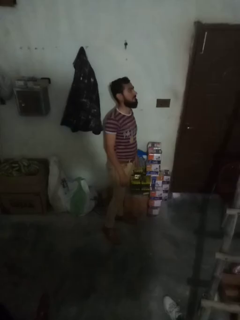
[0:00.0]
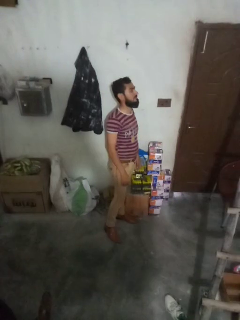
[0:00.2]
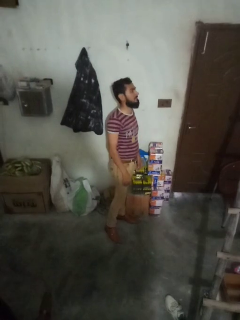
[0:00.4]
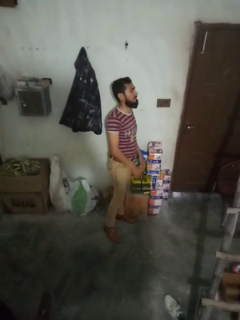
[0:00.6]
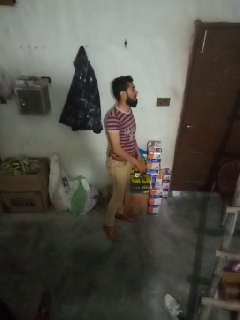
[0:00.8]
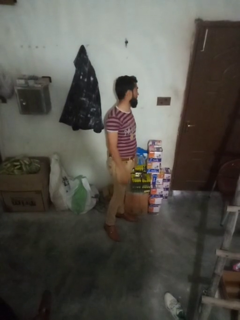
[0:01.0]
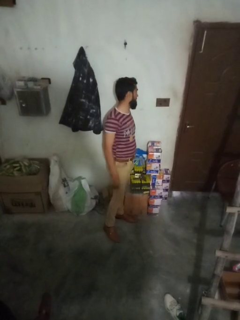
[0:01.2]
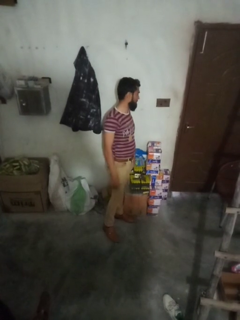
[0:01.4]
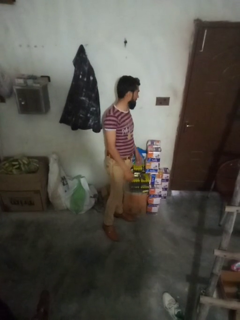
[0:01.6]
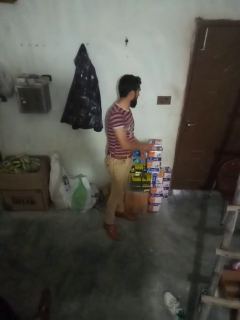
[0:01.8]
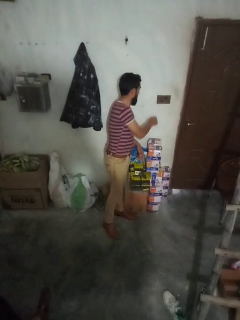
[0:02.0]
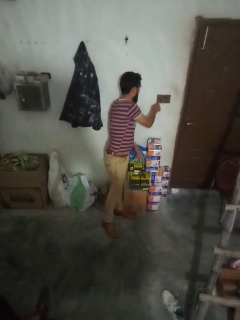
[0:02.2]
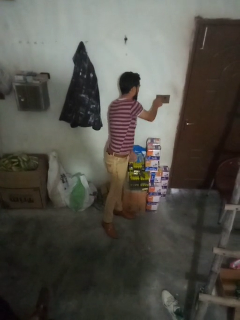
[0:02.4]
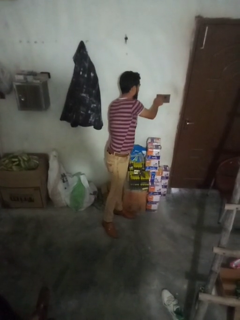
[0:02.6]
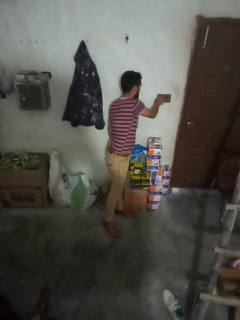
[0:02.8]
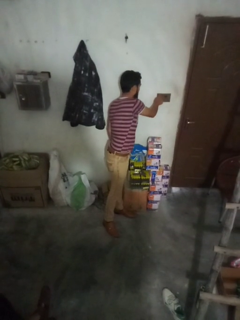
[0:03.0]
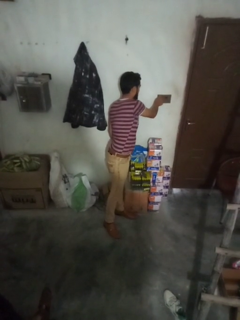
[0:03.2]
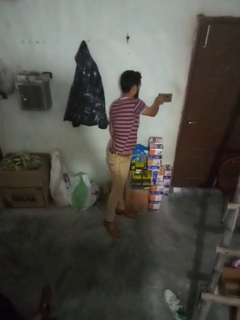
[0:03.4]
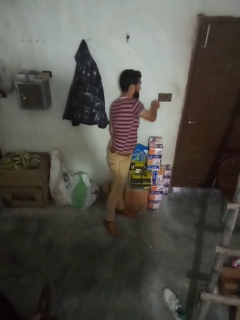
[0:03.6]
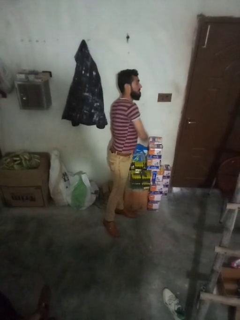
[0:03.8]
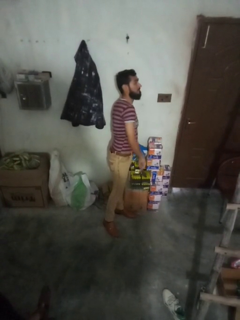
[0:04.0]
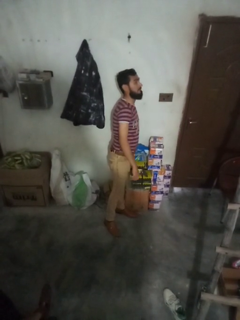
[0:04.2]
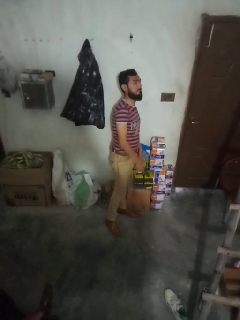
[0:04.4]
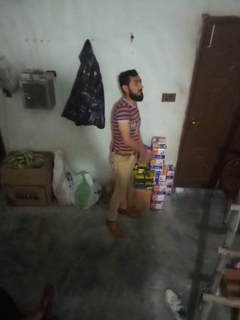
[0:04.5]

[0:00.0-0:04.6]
person adjusts thermostat

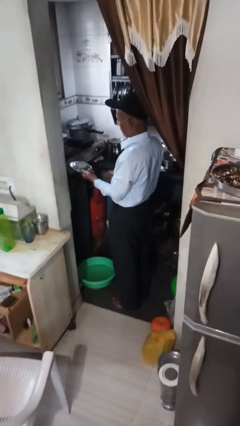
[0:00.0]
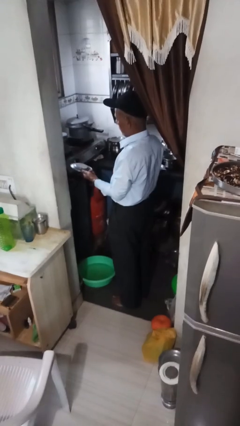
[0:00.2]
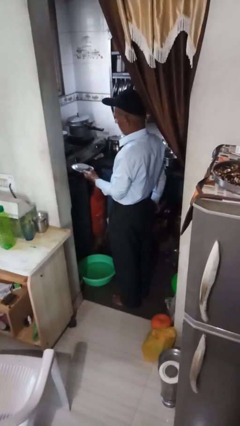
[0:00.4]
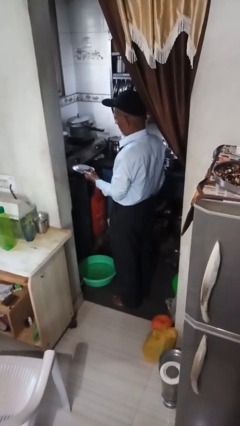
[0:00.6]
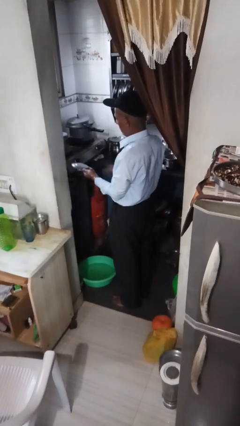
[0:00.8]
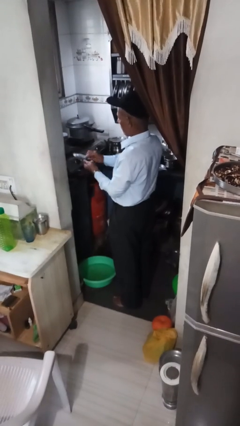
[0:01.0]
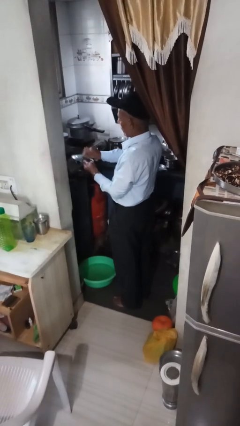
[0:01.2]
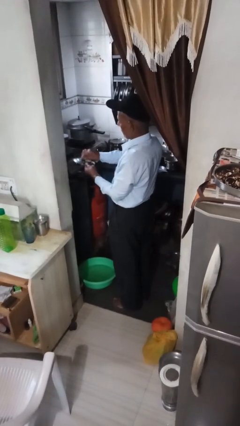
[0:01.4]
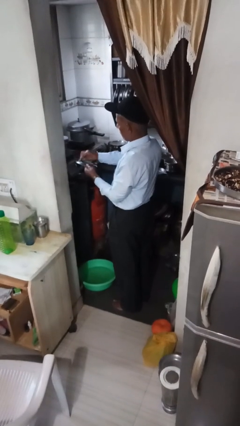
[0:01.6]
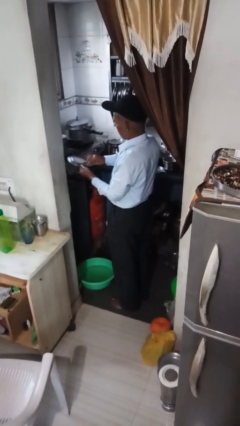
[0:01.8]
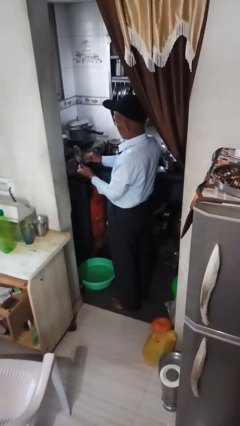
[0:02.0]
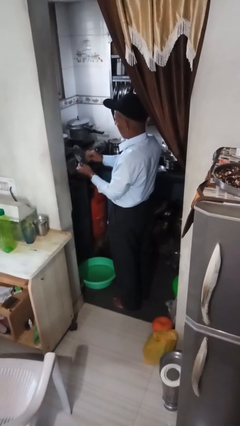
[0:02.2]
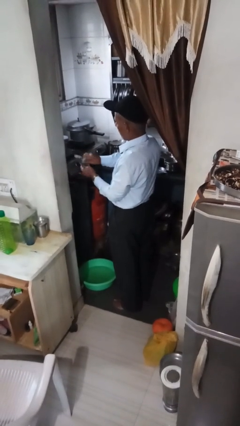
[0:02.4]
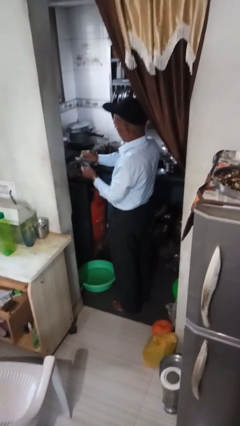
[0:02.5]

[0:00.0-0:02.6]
person washes dish

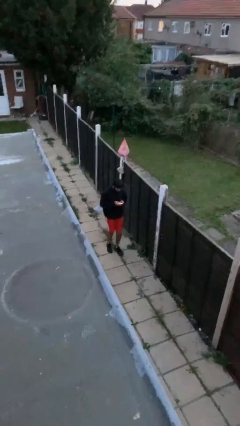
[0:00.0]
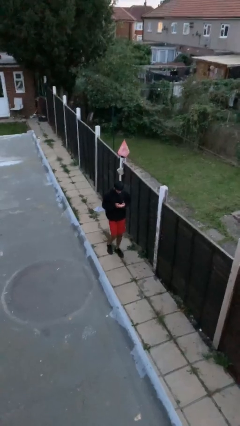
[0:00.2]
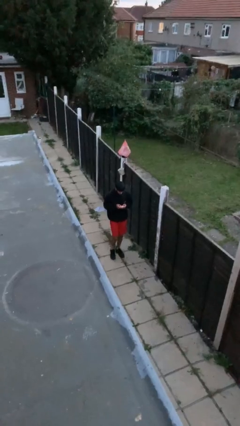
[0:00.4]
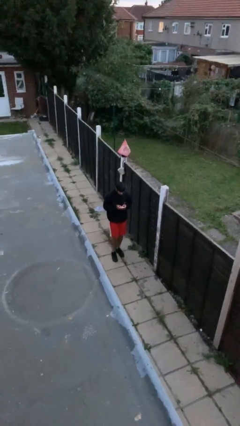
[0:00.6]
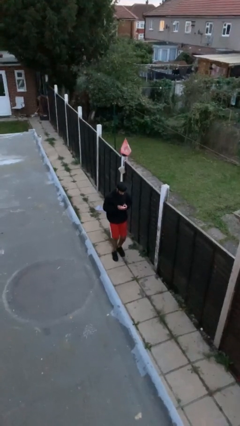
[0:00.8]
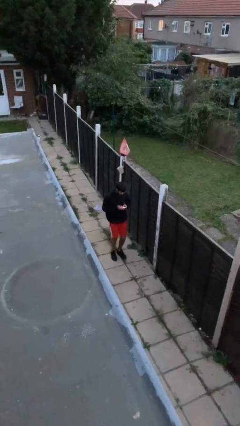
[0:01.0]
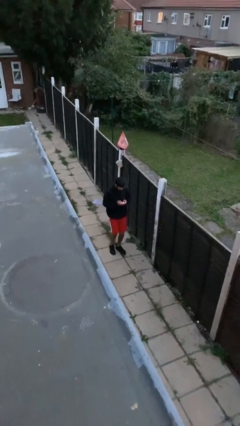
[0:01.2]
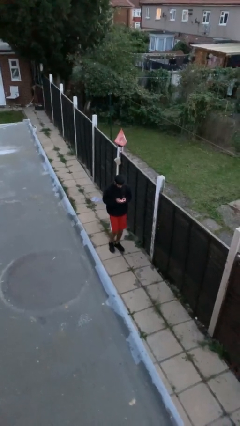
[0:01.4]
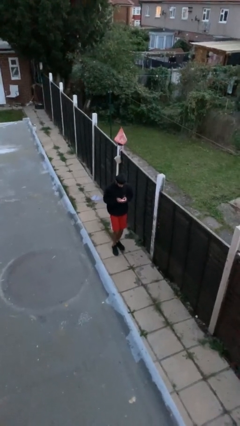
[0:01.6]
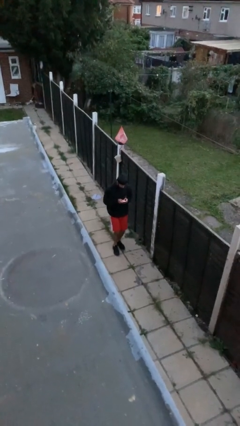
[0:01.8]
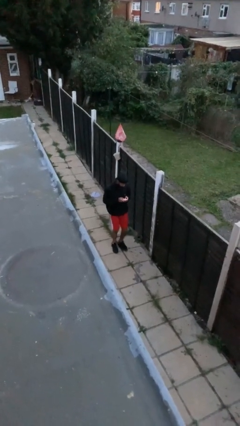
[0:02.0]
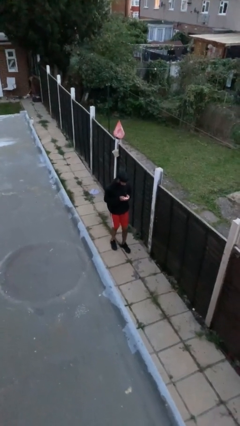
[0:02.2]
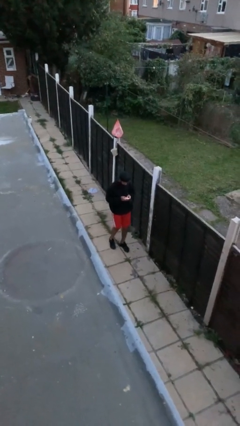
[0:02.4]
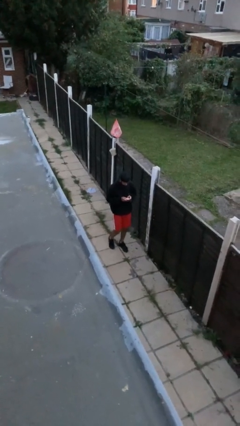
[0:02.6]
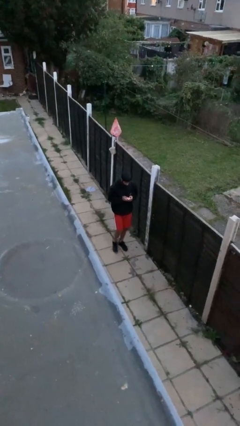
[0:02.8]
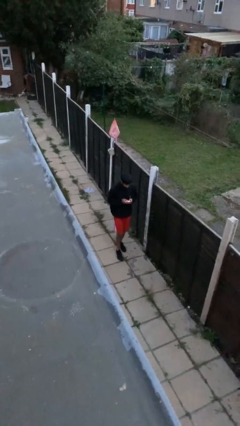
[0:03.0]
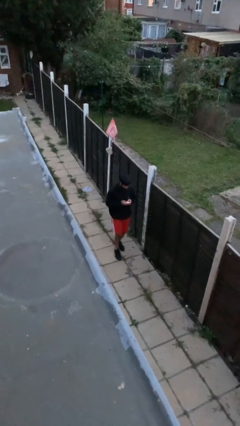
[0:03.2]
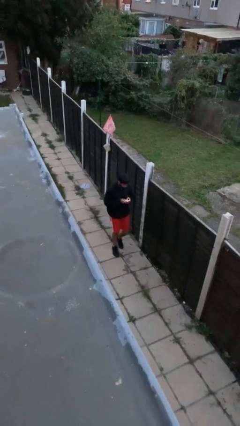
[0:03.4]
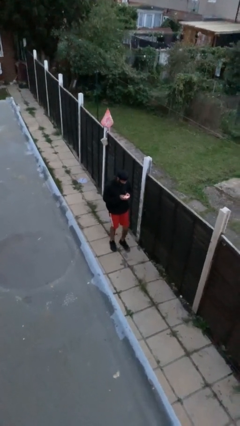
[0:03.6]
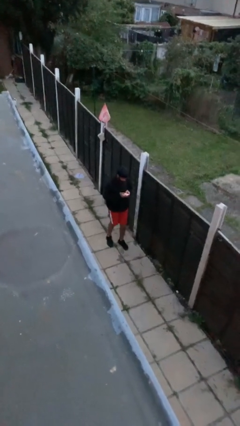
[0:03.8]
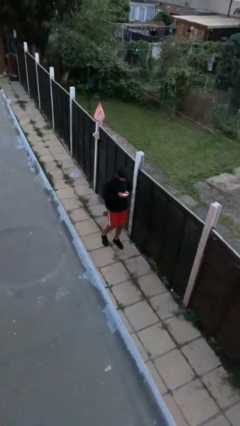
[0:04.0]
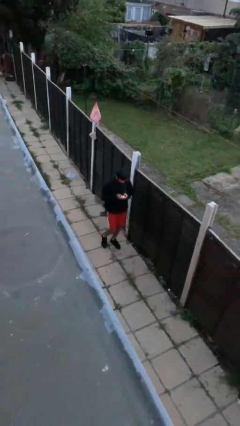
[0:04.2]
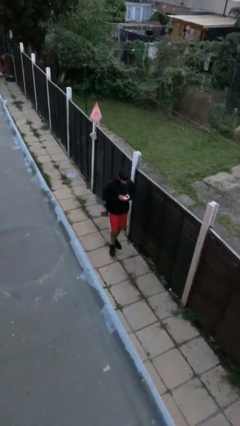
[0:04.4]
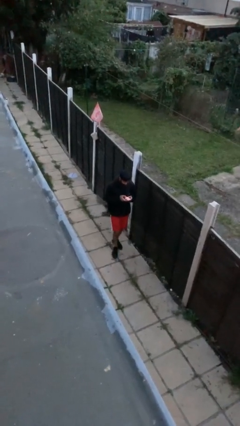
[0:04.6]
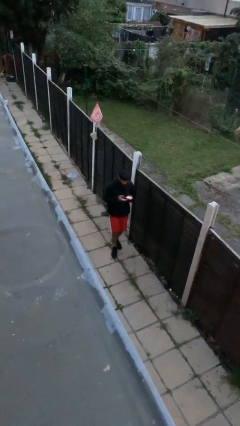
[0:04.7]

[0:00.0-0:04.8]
person texts on phone

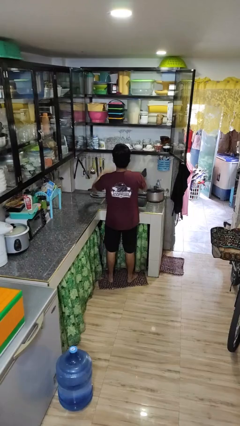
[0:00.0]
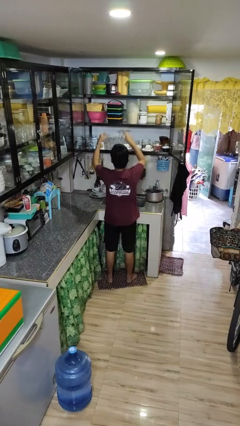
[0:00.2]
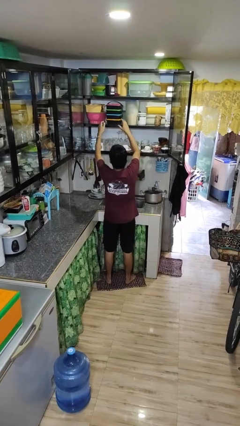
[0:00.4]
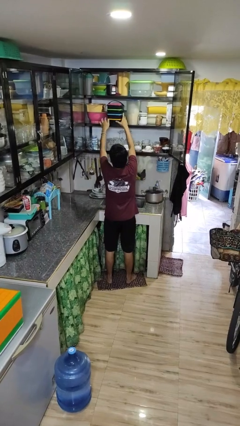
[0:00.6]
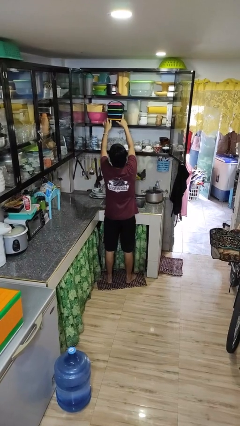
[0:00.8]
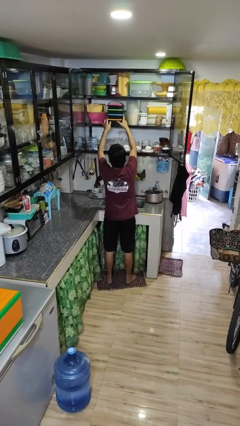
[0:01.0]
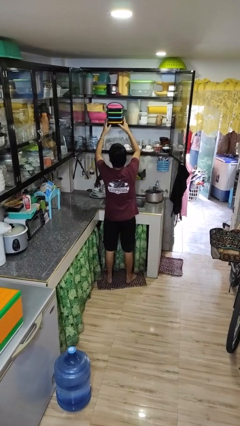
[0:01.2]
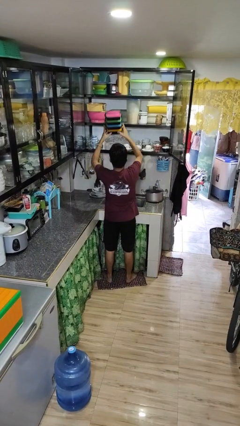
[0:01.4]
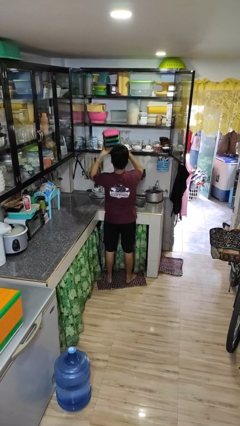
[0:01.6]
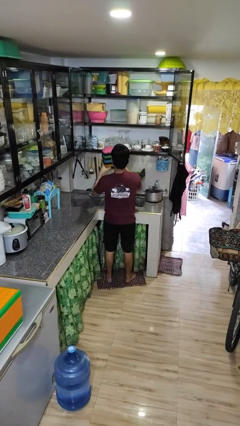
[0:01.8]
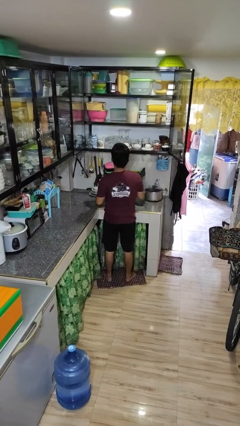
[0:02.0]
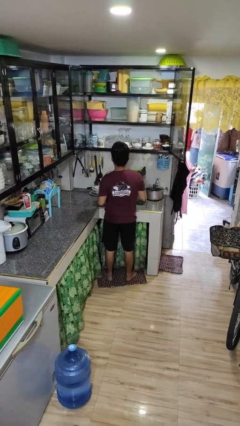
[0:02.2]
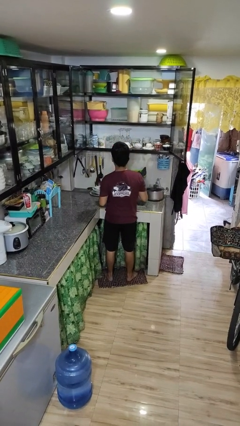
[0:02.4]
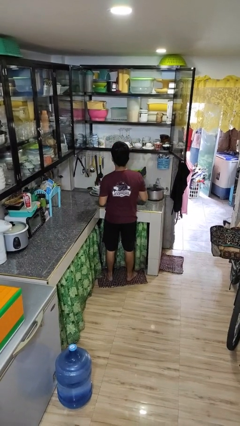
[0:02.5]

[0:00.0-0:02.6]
person picks up object from cabinet

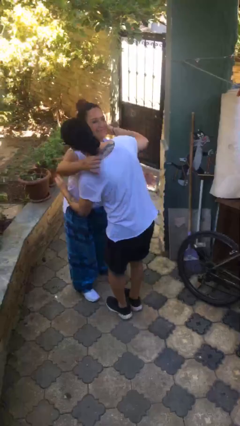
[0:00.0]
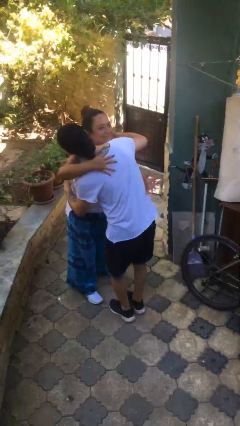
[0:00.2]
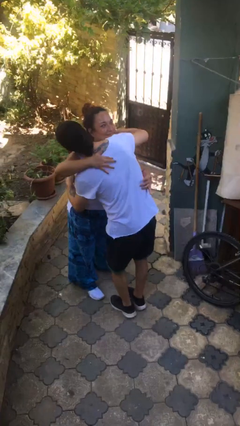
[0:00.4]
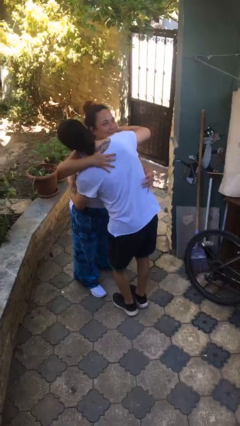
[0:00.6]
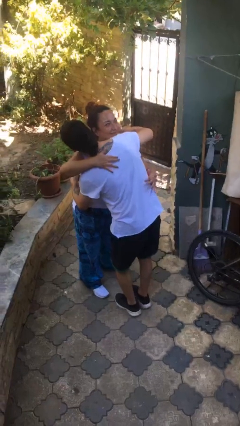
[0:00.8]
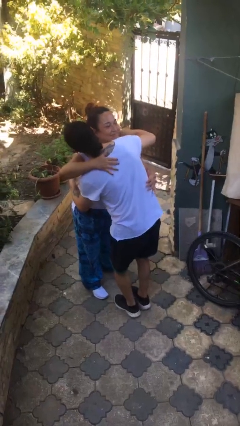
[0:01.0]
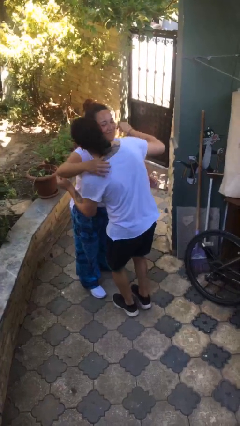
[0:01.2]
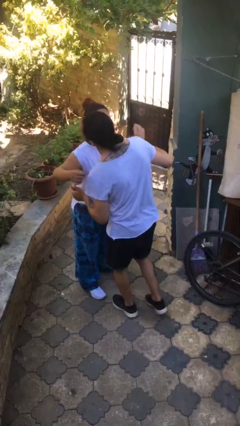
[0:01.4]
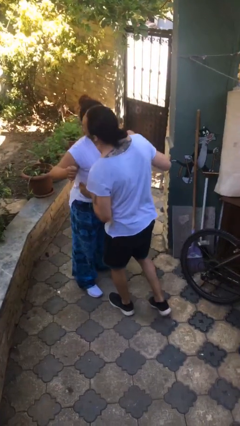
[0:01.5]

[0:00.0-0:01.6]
person embraces person

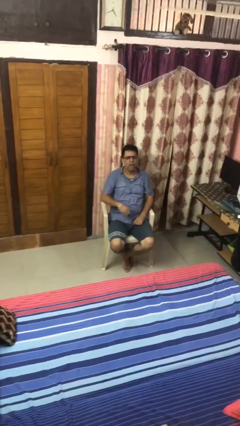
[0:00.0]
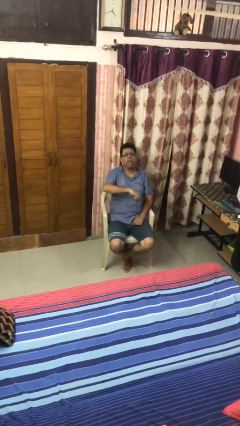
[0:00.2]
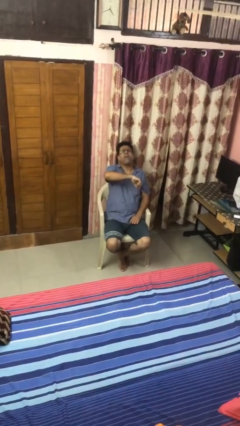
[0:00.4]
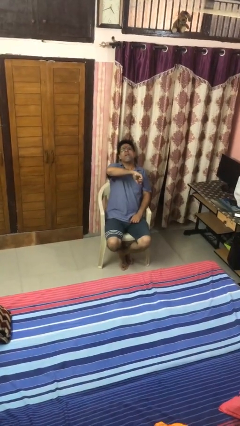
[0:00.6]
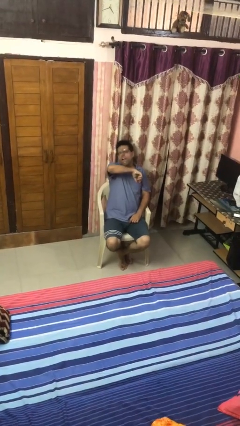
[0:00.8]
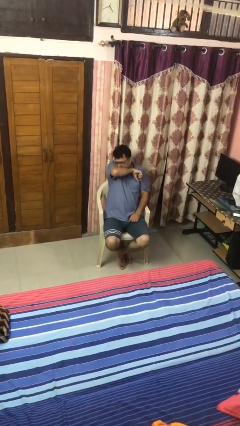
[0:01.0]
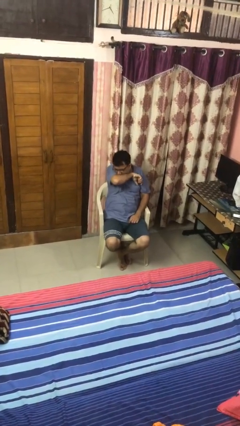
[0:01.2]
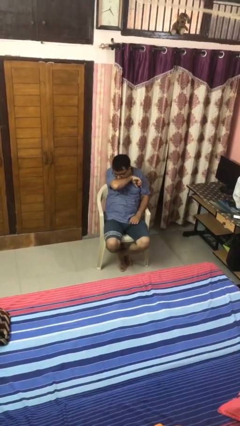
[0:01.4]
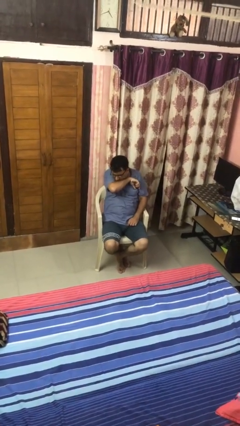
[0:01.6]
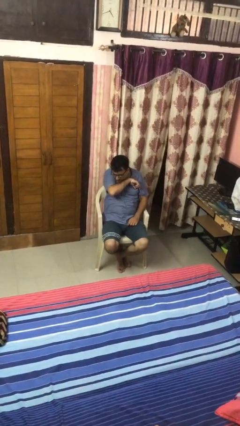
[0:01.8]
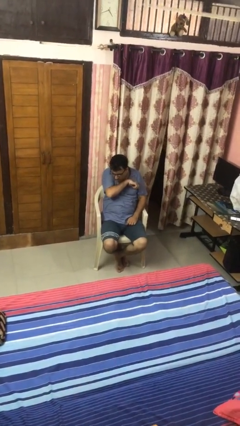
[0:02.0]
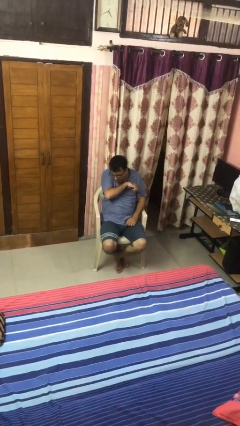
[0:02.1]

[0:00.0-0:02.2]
person sneezes into arm
